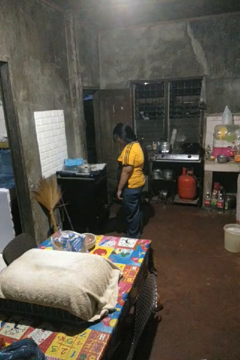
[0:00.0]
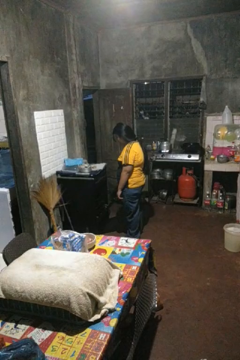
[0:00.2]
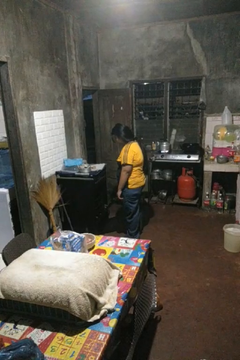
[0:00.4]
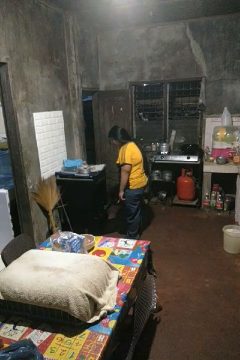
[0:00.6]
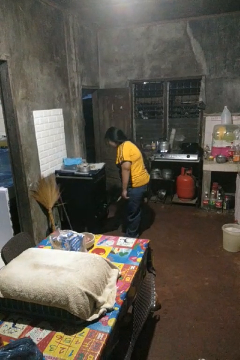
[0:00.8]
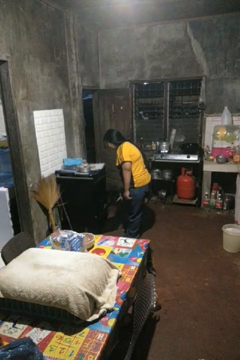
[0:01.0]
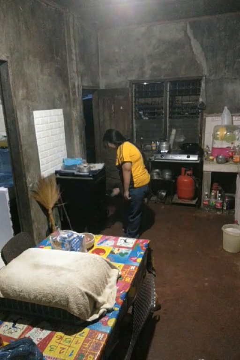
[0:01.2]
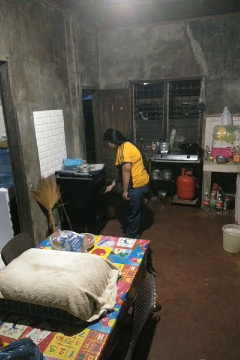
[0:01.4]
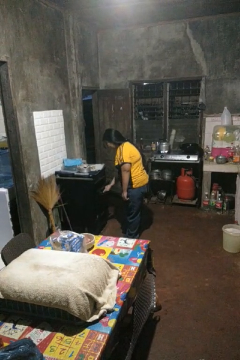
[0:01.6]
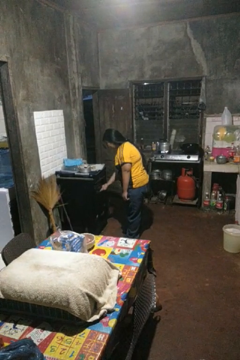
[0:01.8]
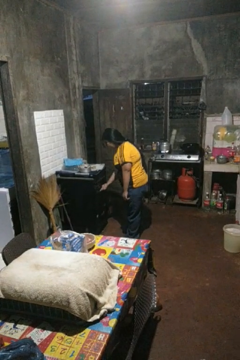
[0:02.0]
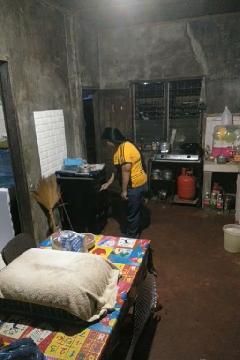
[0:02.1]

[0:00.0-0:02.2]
person closes oven door

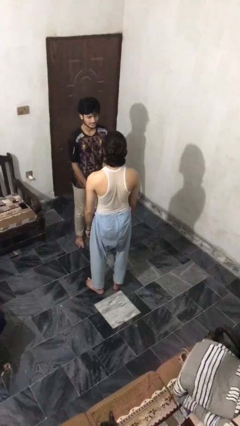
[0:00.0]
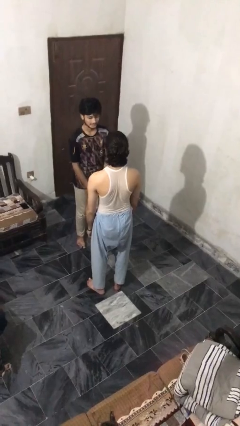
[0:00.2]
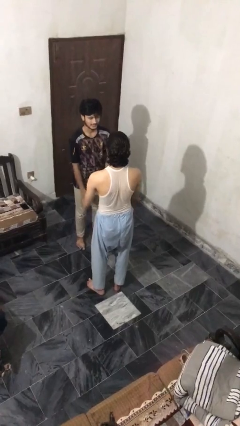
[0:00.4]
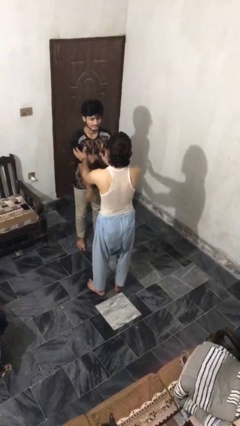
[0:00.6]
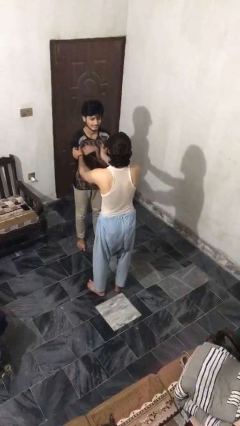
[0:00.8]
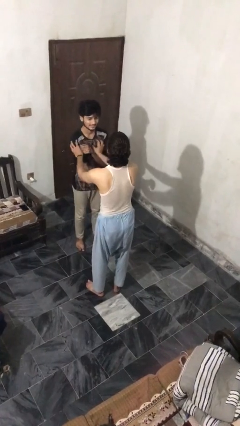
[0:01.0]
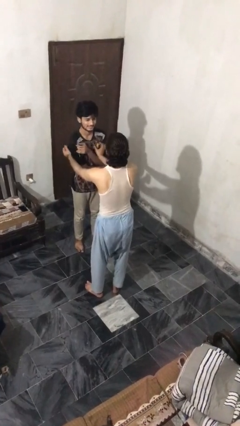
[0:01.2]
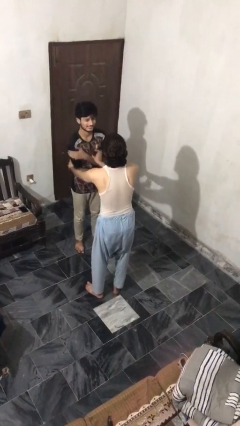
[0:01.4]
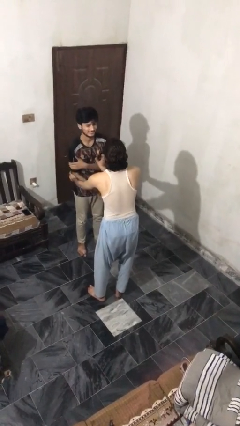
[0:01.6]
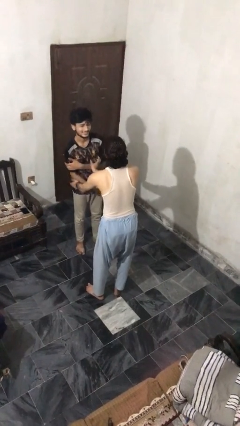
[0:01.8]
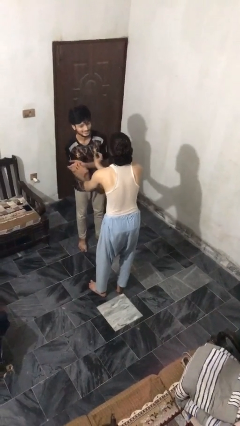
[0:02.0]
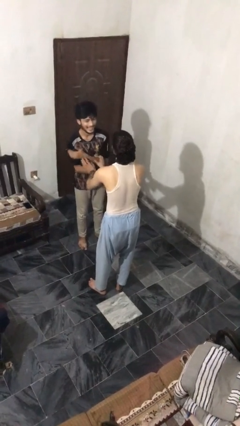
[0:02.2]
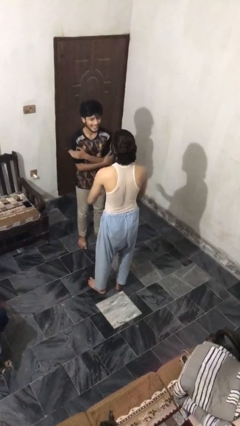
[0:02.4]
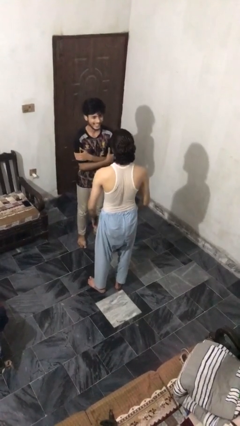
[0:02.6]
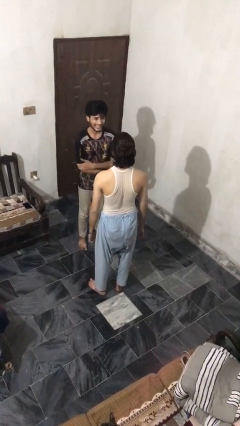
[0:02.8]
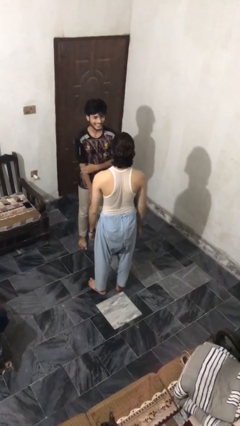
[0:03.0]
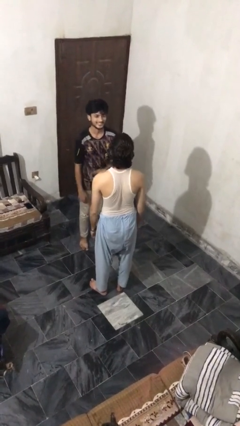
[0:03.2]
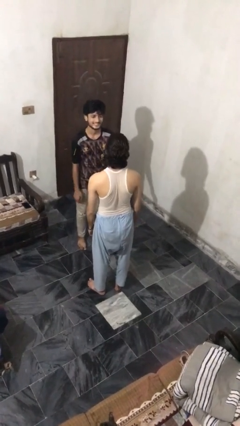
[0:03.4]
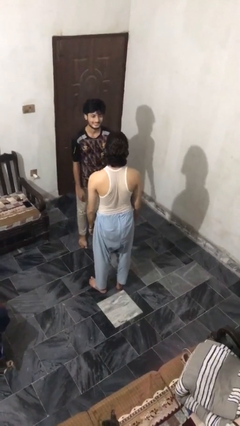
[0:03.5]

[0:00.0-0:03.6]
person tickles person

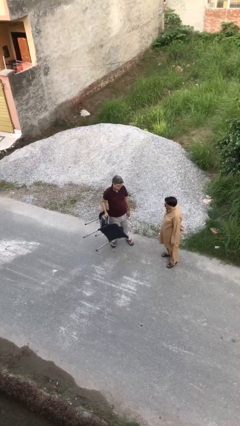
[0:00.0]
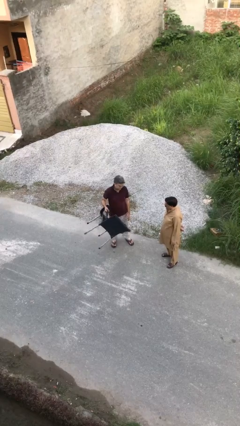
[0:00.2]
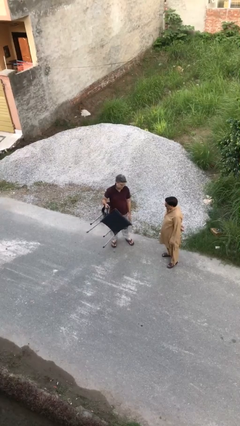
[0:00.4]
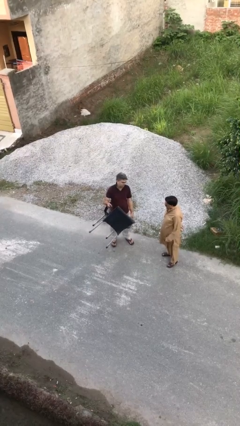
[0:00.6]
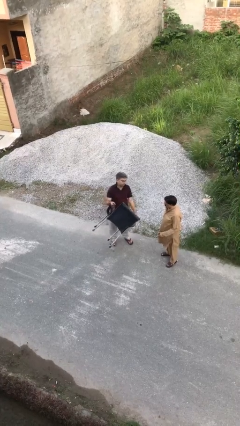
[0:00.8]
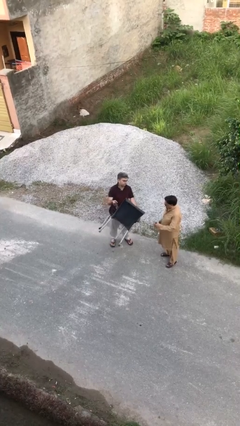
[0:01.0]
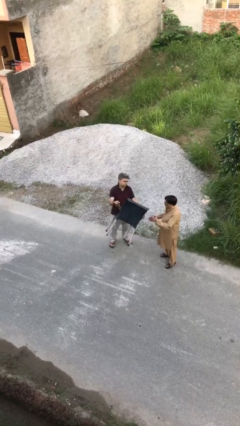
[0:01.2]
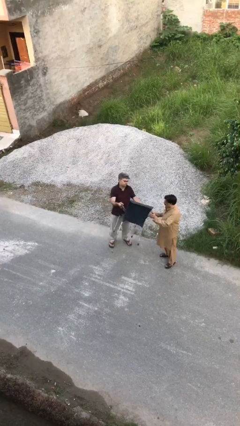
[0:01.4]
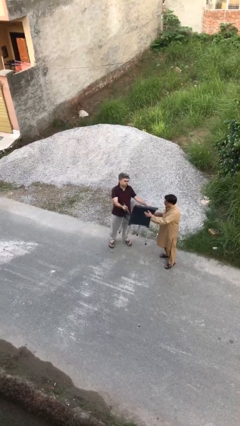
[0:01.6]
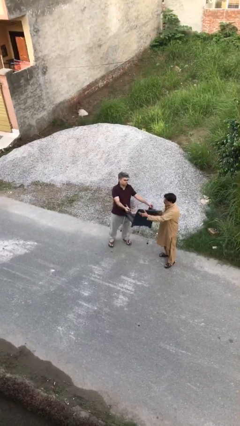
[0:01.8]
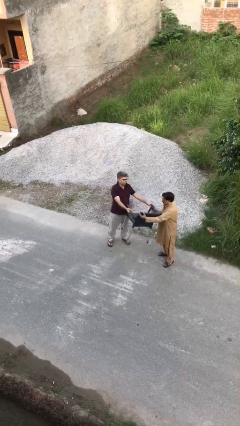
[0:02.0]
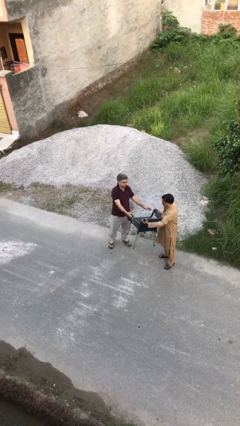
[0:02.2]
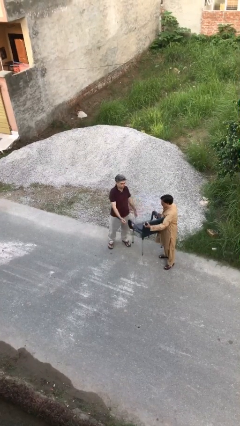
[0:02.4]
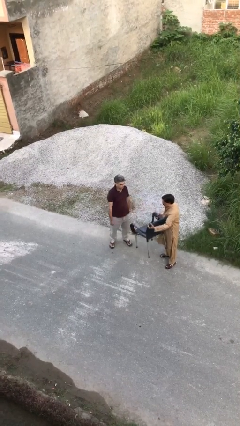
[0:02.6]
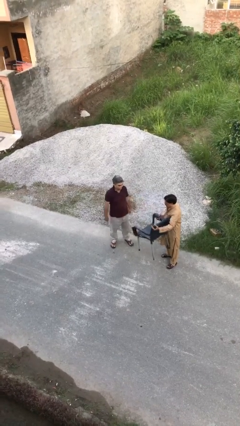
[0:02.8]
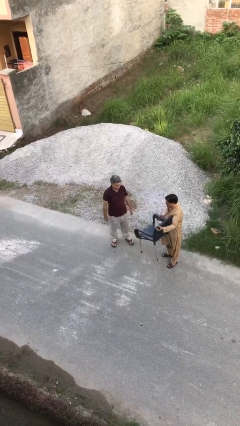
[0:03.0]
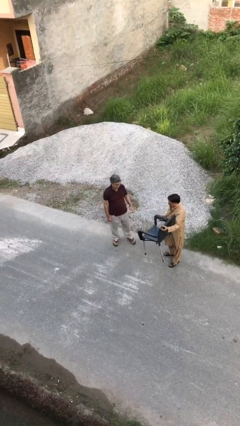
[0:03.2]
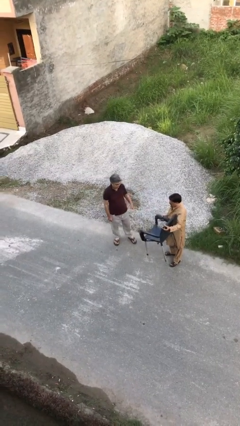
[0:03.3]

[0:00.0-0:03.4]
person transfers object to person

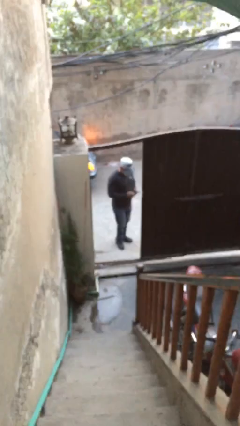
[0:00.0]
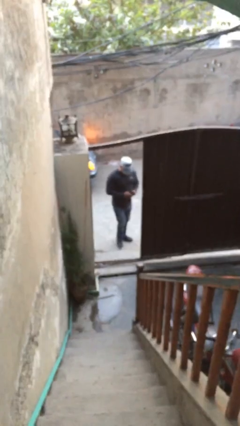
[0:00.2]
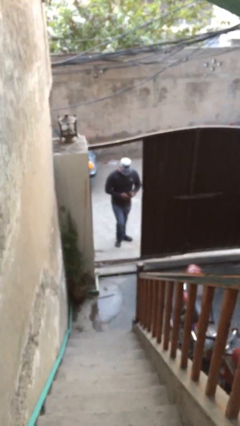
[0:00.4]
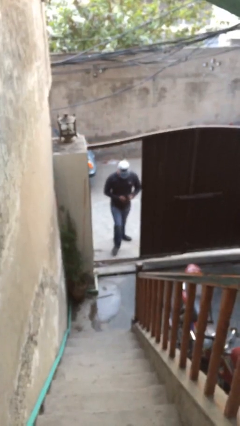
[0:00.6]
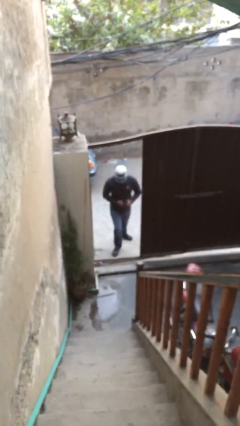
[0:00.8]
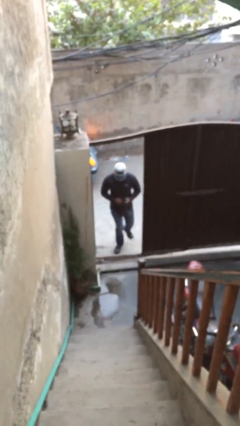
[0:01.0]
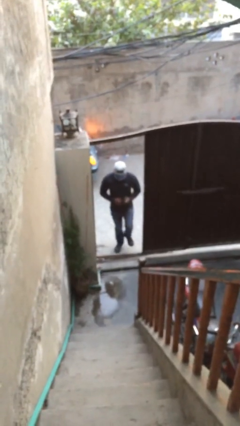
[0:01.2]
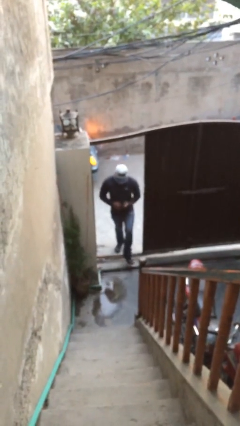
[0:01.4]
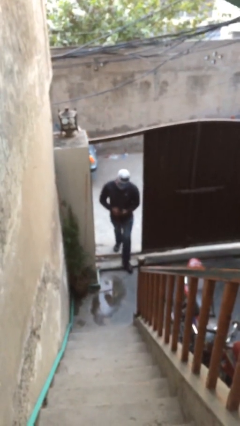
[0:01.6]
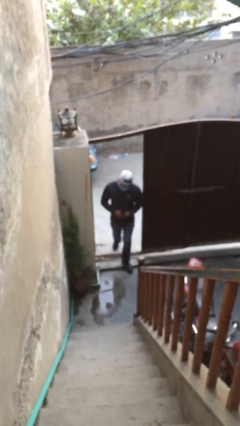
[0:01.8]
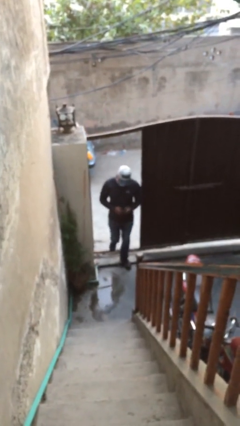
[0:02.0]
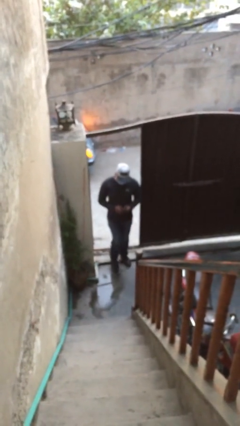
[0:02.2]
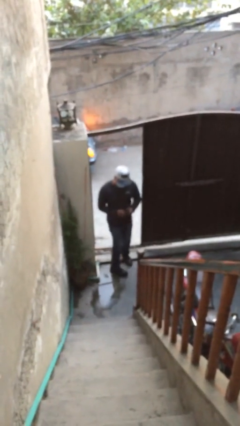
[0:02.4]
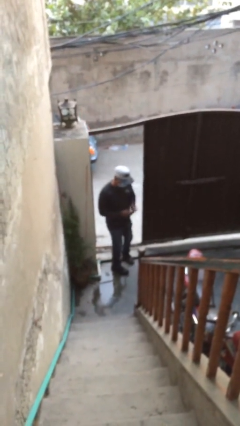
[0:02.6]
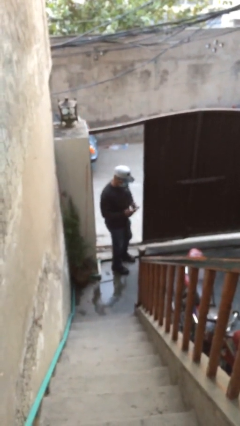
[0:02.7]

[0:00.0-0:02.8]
person enters scene through structure

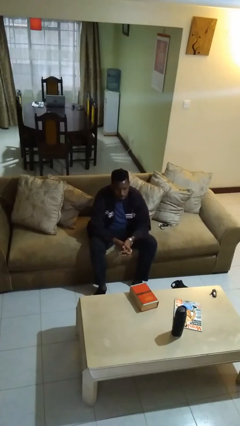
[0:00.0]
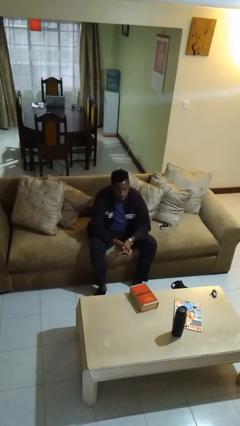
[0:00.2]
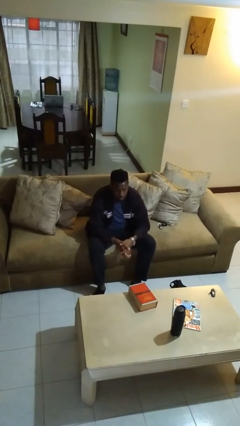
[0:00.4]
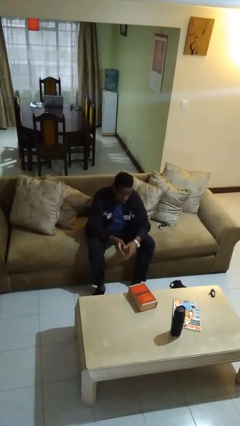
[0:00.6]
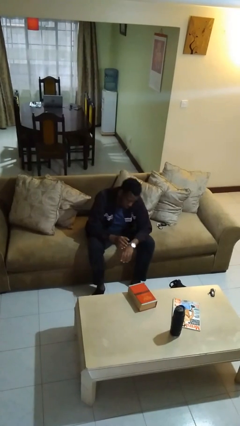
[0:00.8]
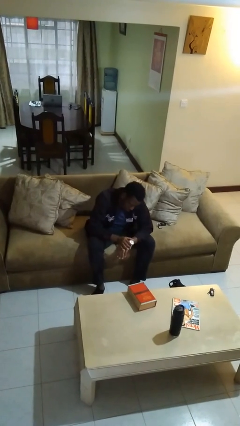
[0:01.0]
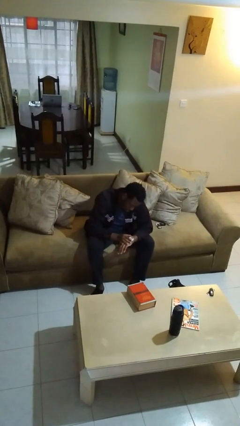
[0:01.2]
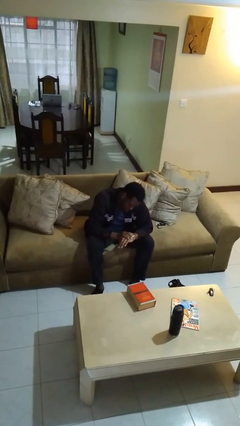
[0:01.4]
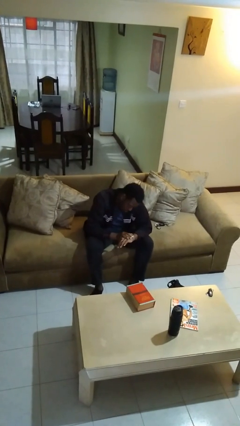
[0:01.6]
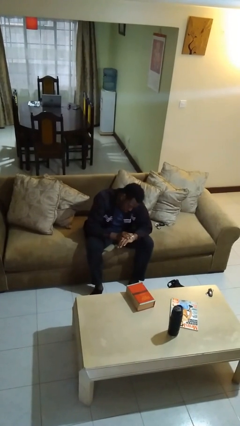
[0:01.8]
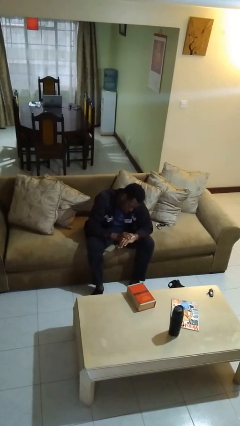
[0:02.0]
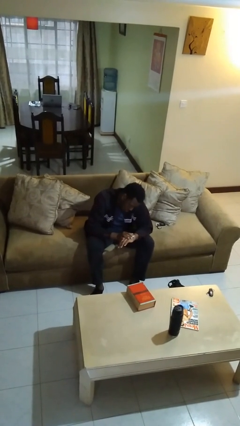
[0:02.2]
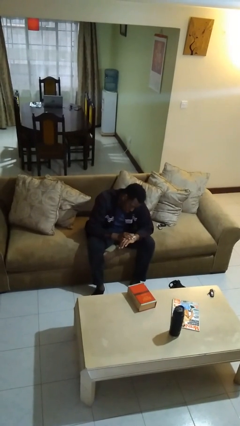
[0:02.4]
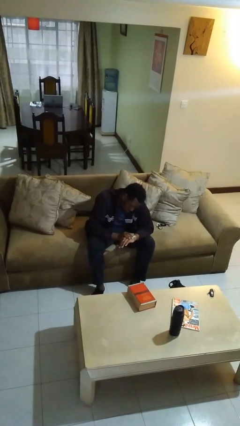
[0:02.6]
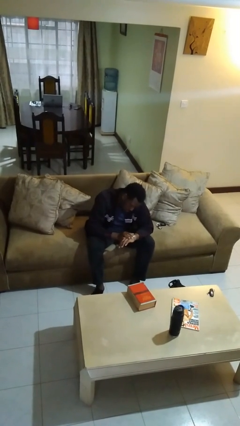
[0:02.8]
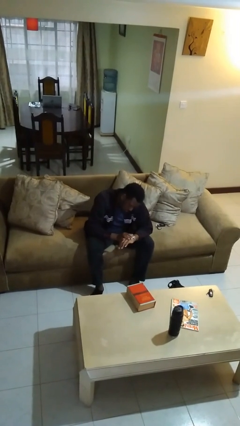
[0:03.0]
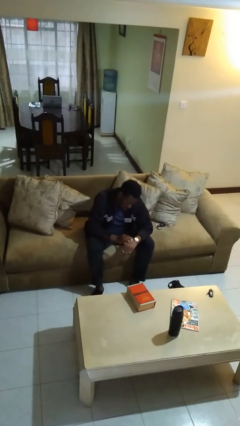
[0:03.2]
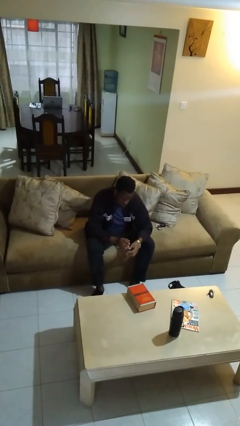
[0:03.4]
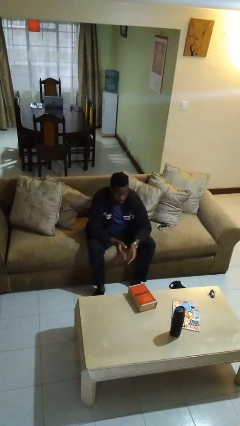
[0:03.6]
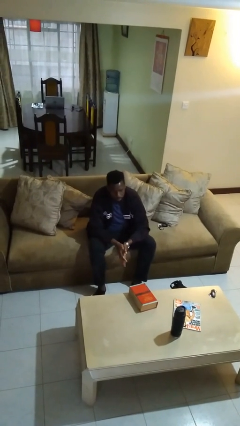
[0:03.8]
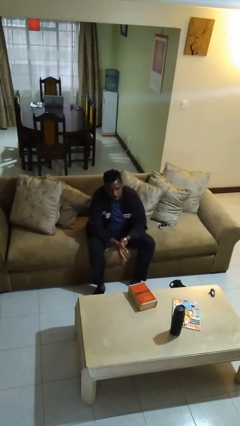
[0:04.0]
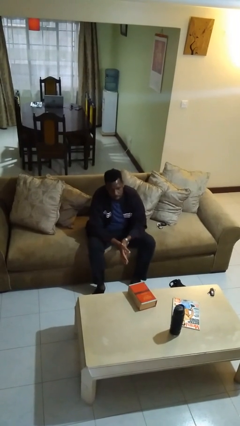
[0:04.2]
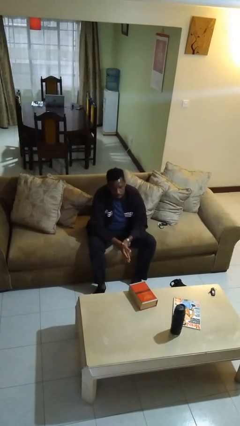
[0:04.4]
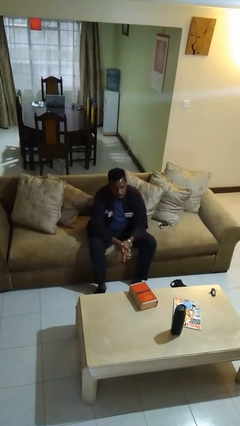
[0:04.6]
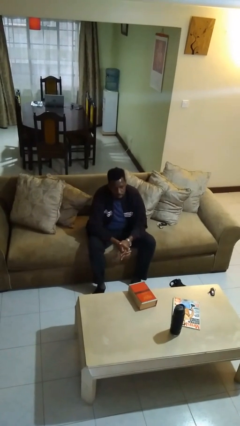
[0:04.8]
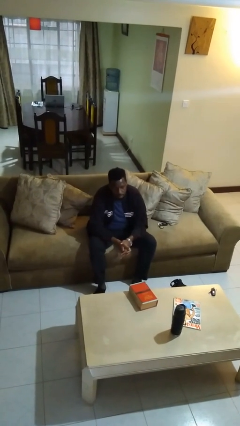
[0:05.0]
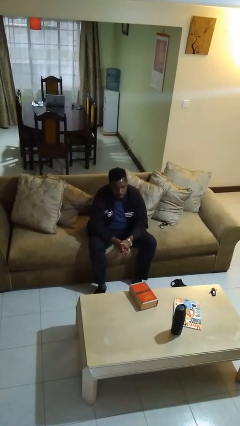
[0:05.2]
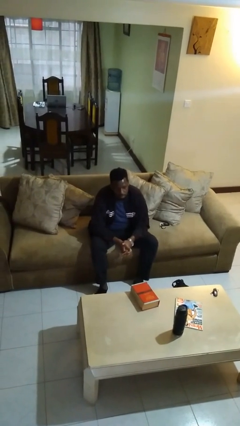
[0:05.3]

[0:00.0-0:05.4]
person looks at wristwatch
